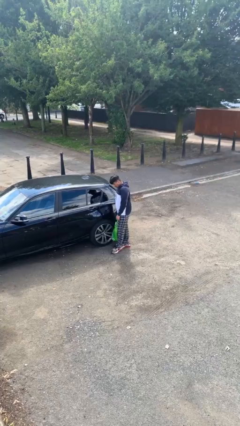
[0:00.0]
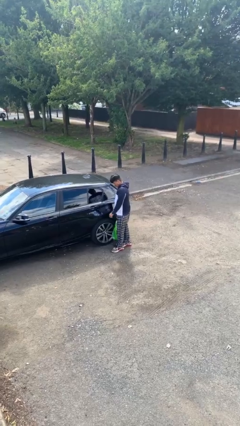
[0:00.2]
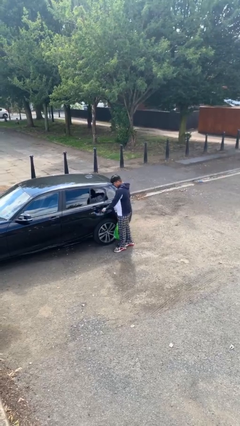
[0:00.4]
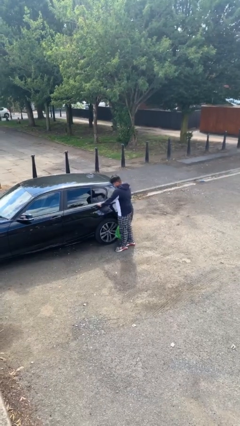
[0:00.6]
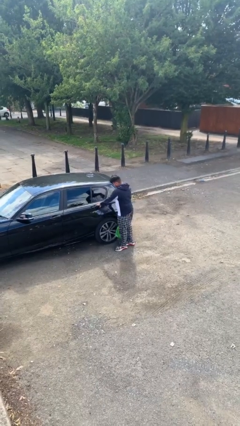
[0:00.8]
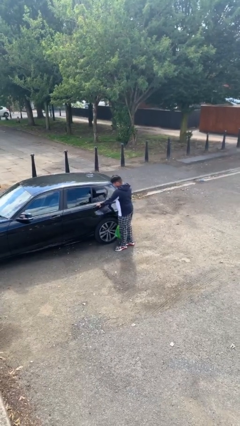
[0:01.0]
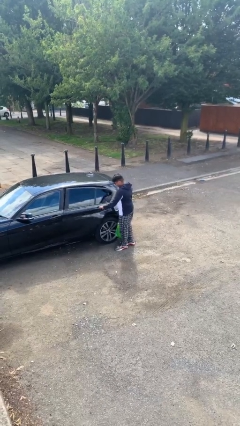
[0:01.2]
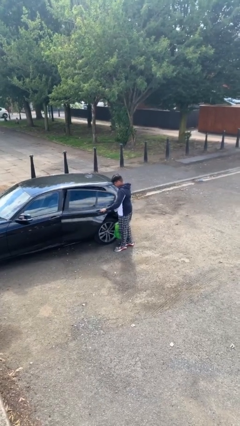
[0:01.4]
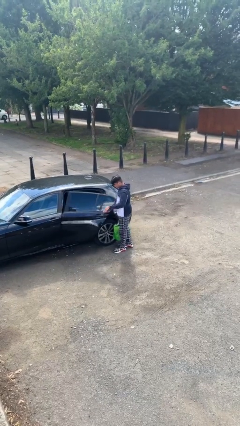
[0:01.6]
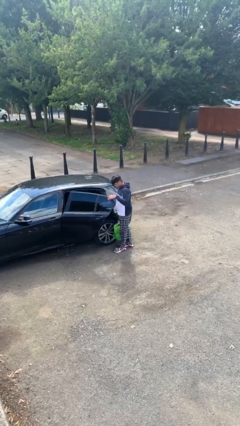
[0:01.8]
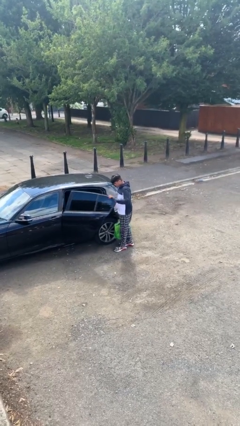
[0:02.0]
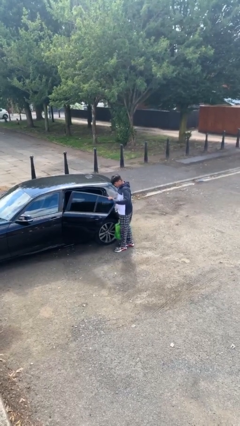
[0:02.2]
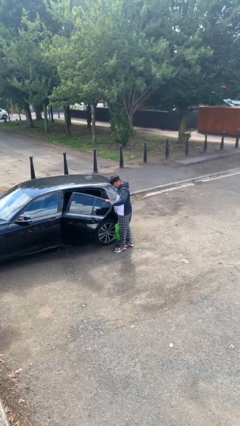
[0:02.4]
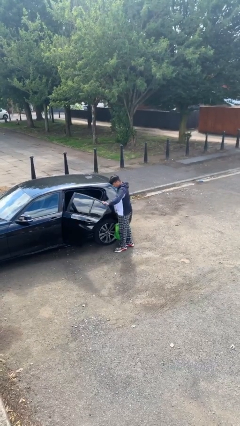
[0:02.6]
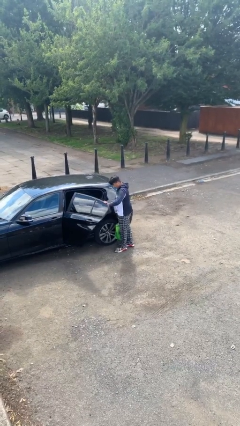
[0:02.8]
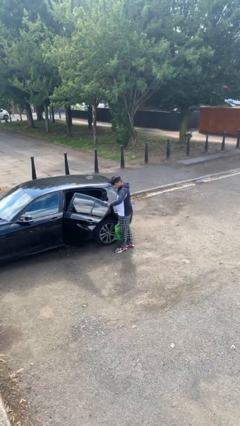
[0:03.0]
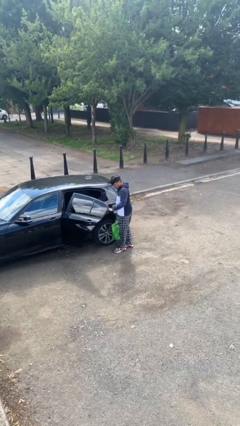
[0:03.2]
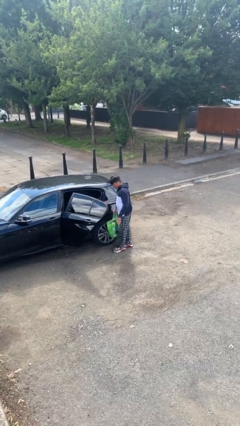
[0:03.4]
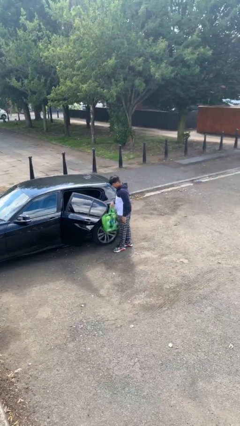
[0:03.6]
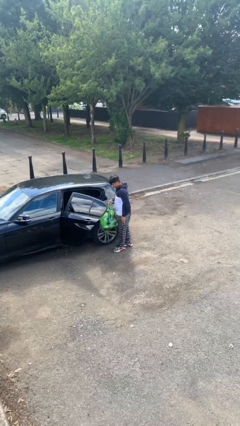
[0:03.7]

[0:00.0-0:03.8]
person opens car door

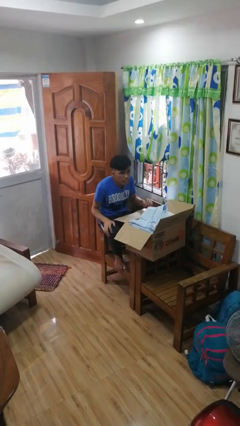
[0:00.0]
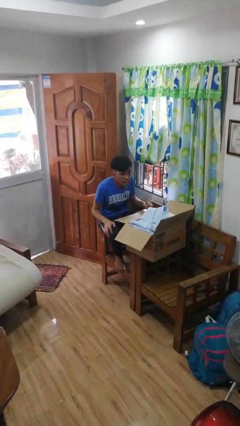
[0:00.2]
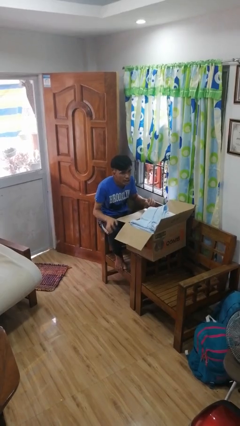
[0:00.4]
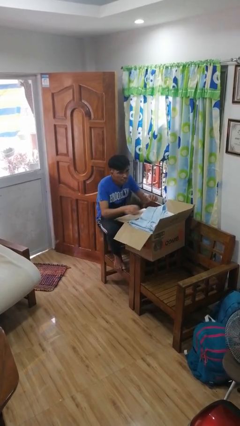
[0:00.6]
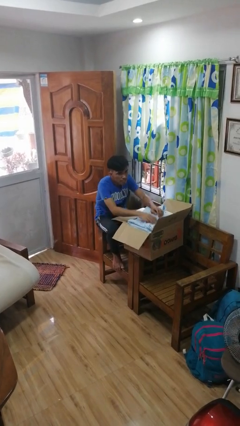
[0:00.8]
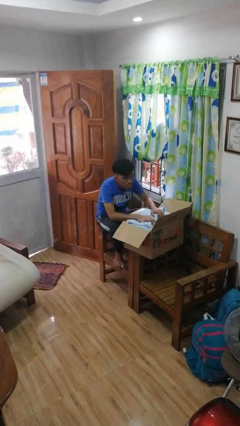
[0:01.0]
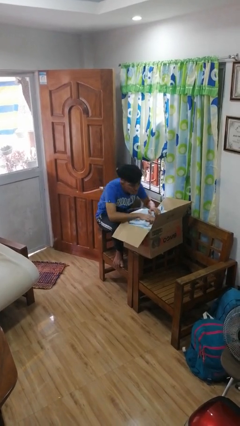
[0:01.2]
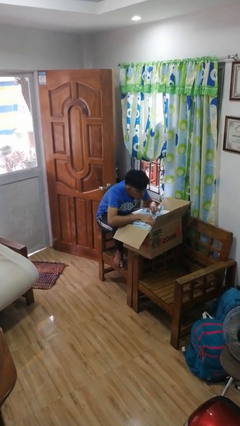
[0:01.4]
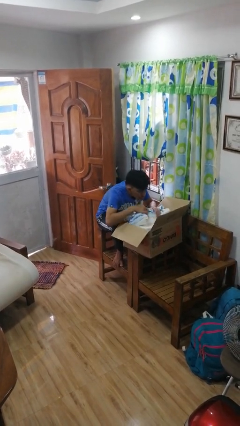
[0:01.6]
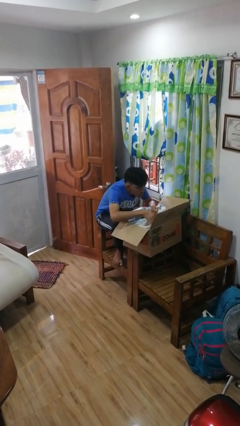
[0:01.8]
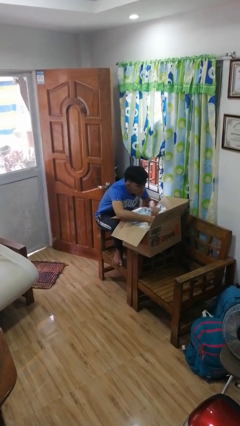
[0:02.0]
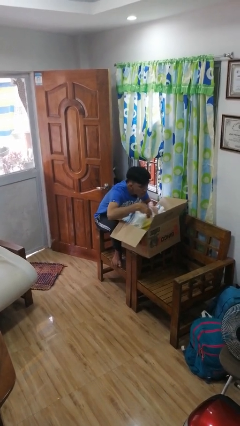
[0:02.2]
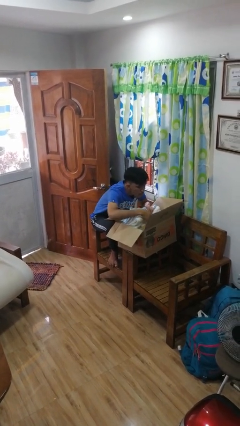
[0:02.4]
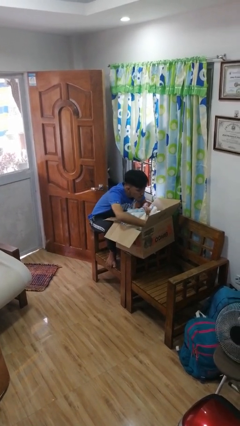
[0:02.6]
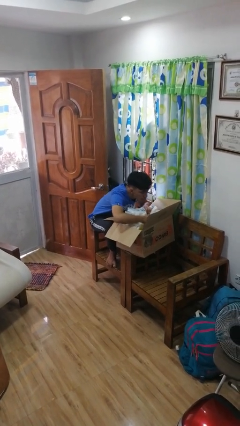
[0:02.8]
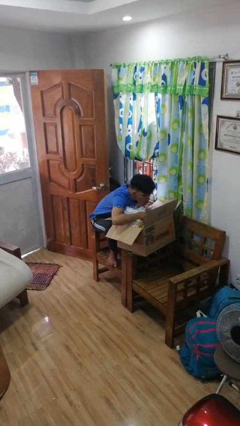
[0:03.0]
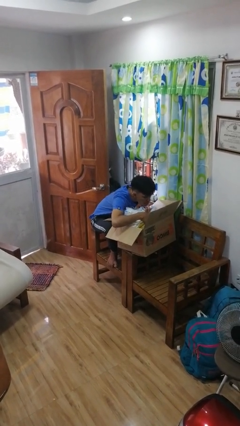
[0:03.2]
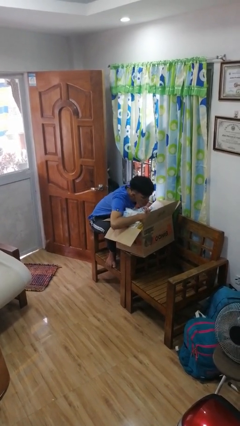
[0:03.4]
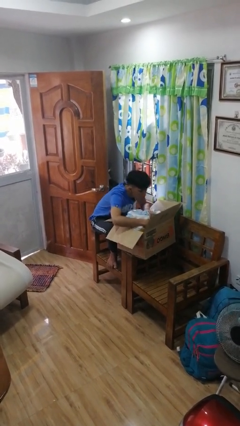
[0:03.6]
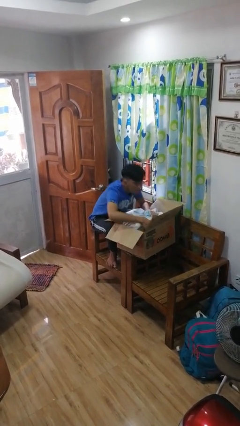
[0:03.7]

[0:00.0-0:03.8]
person searches in box

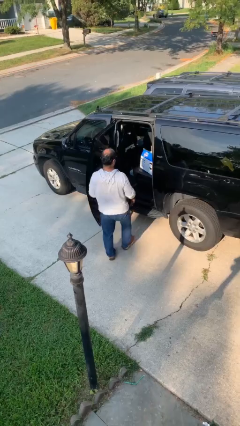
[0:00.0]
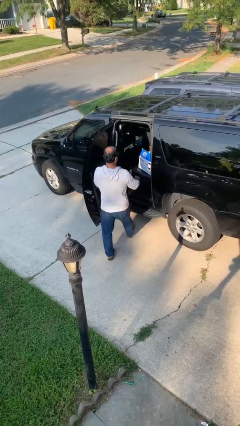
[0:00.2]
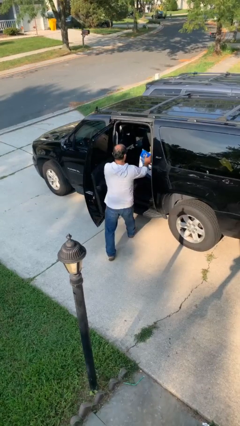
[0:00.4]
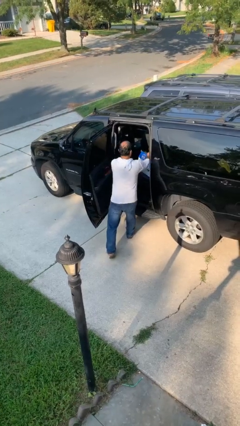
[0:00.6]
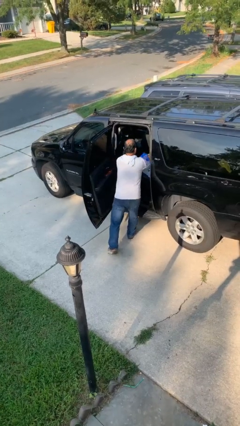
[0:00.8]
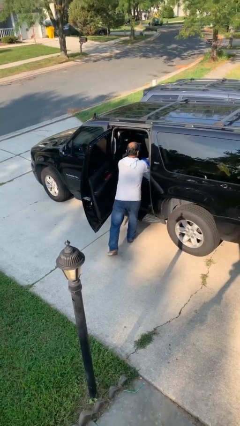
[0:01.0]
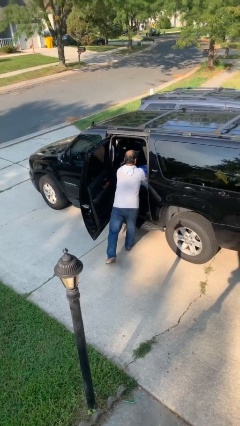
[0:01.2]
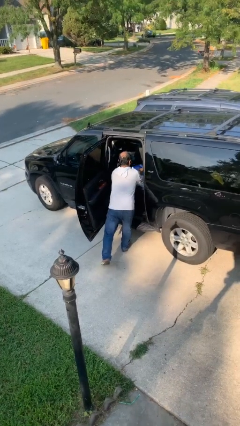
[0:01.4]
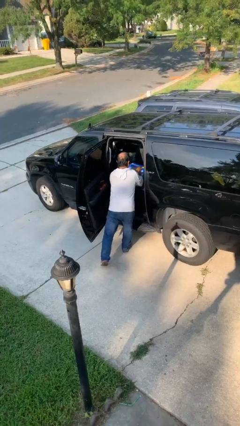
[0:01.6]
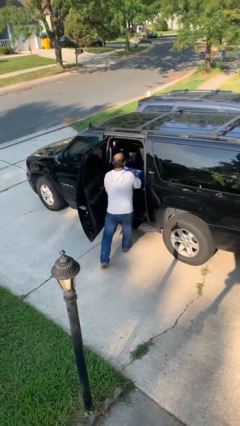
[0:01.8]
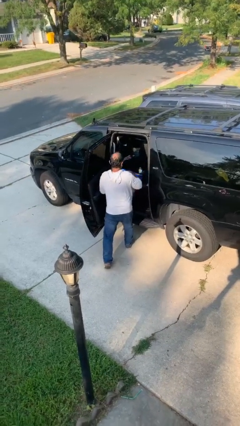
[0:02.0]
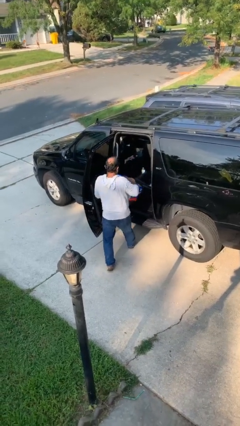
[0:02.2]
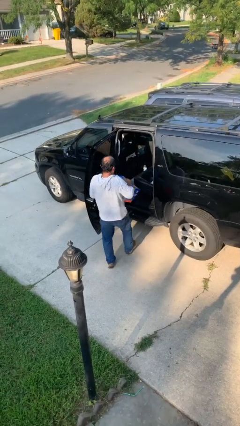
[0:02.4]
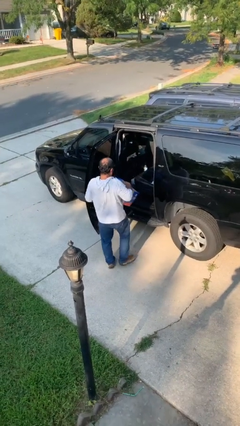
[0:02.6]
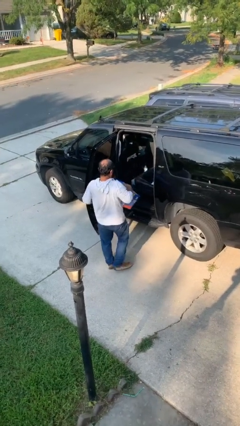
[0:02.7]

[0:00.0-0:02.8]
person unloads car

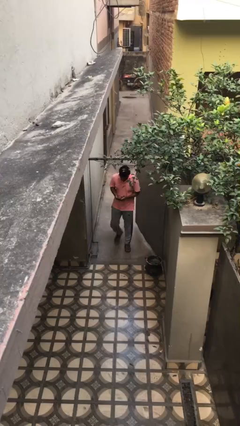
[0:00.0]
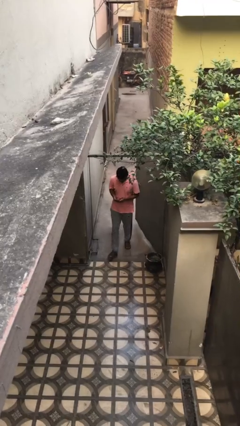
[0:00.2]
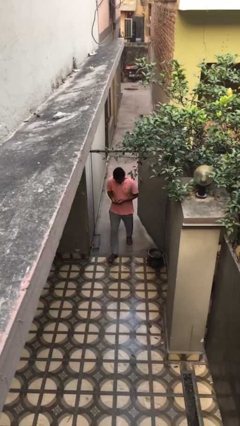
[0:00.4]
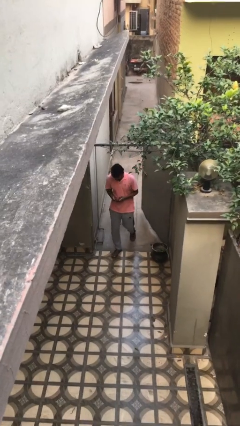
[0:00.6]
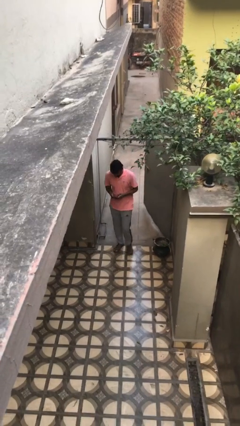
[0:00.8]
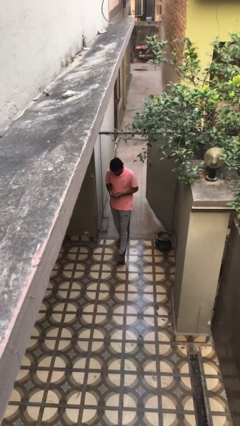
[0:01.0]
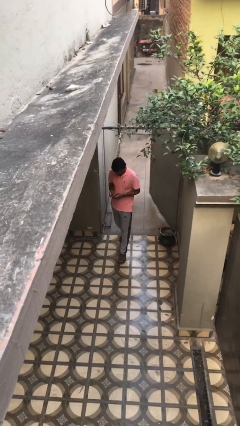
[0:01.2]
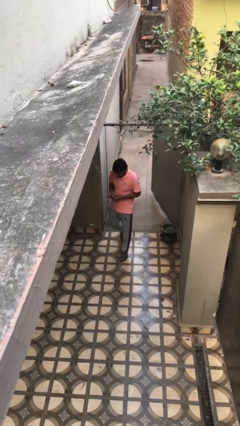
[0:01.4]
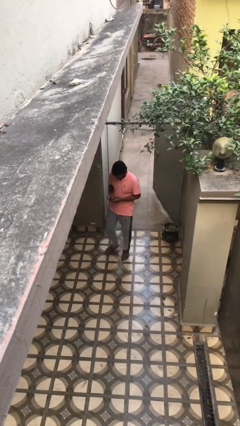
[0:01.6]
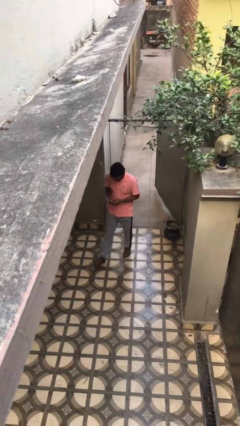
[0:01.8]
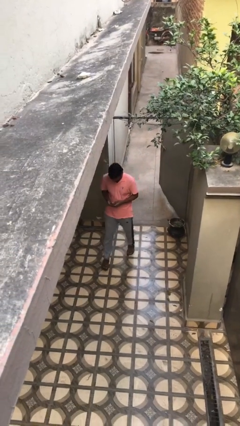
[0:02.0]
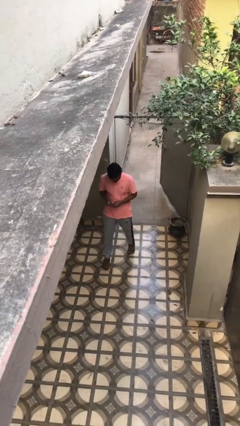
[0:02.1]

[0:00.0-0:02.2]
person enters scene through structure

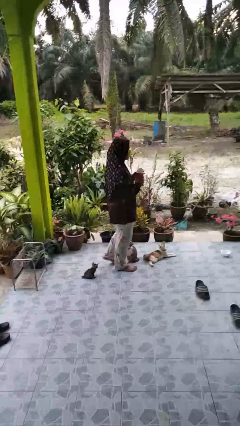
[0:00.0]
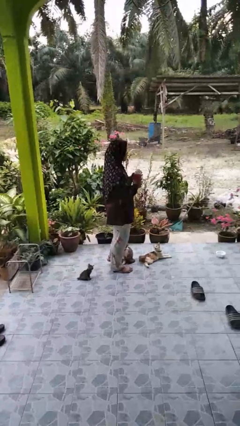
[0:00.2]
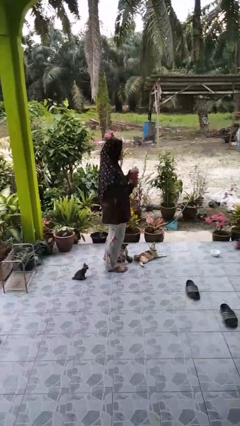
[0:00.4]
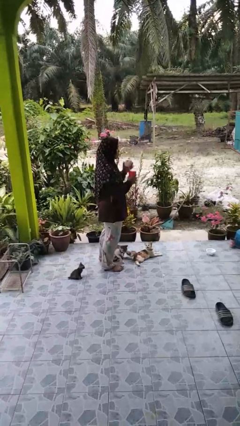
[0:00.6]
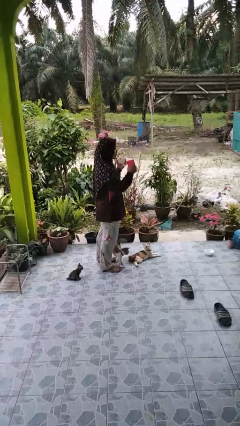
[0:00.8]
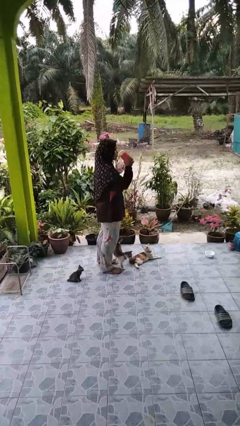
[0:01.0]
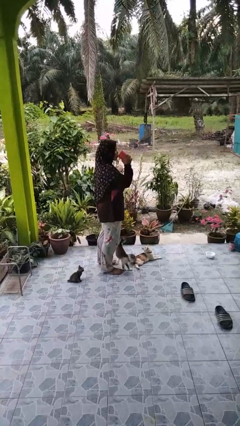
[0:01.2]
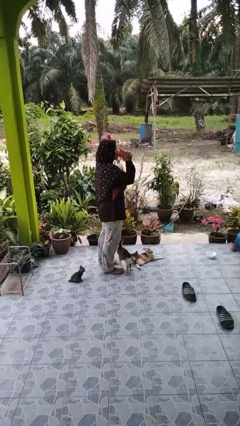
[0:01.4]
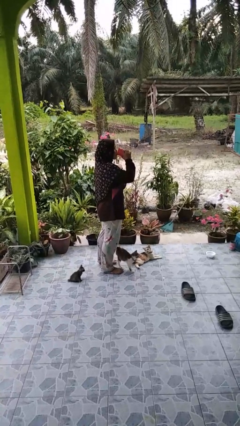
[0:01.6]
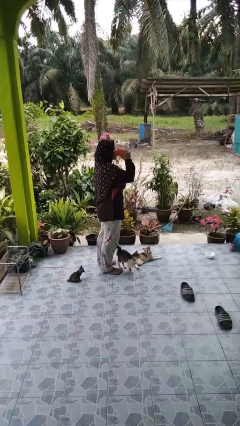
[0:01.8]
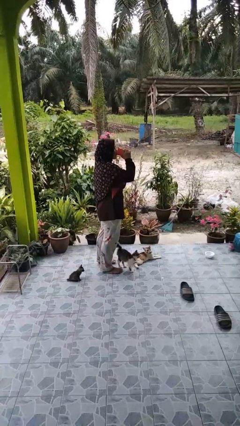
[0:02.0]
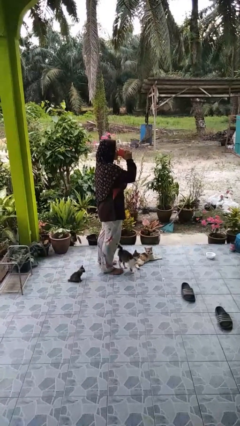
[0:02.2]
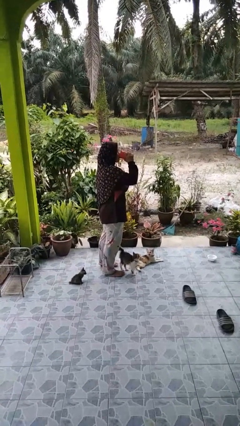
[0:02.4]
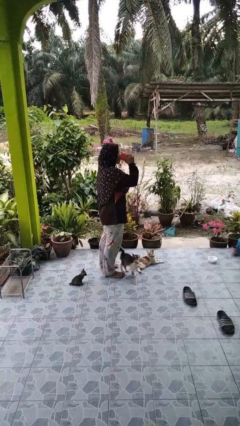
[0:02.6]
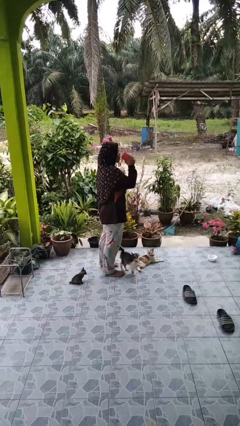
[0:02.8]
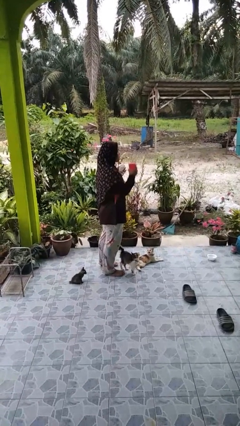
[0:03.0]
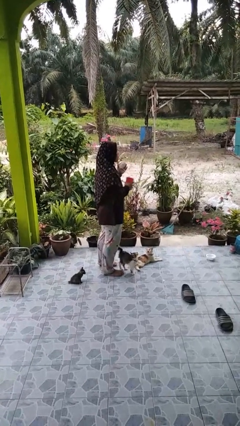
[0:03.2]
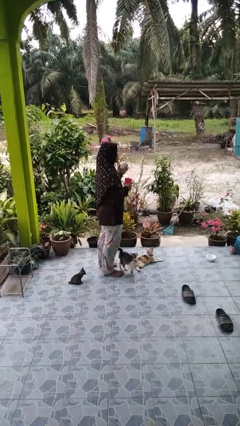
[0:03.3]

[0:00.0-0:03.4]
person drinks from bottle

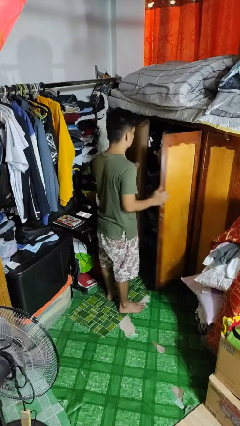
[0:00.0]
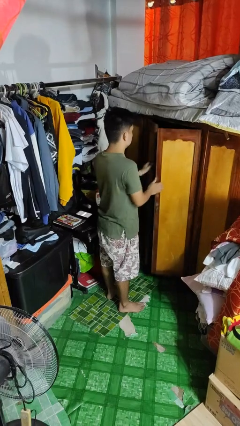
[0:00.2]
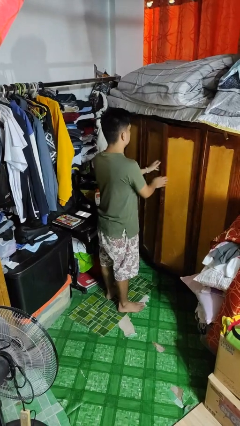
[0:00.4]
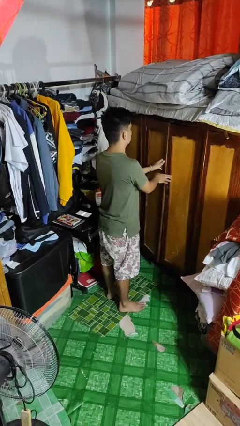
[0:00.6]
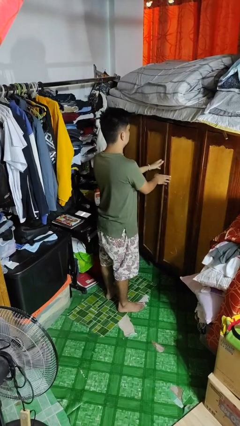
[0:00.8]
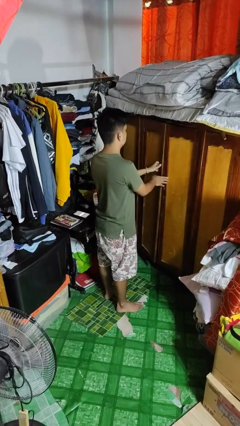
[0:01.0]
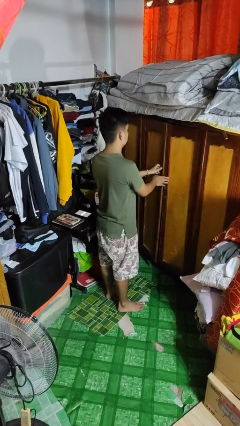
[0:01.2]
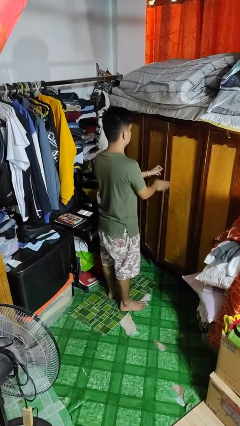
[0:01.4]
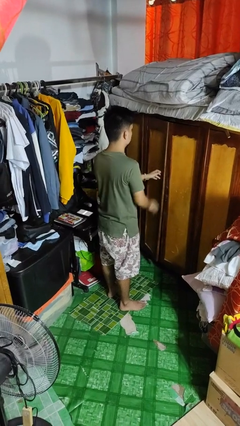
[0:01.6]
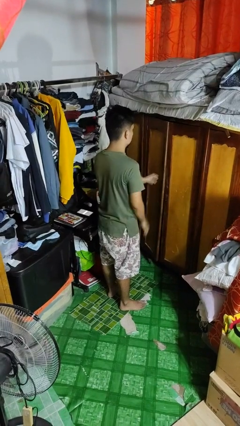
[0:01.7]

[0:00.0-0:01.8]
person closes closet door
